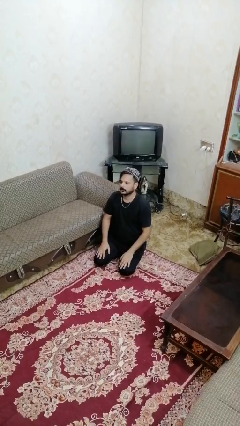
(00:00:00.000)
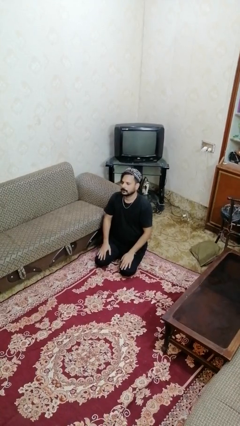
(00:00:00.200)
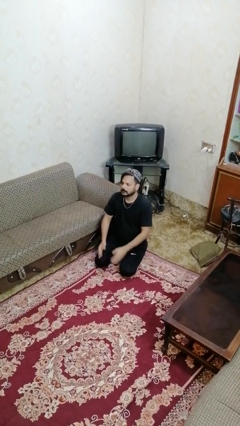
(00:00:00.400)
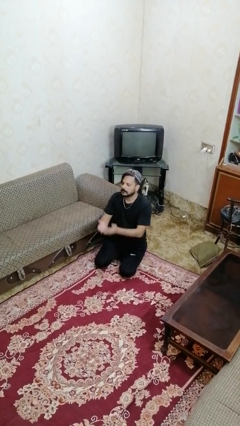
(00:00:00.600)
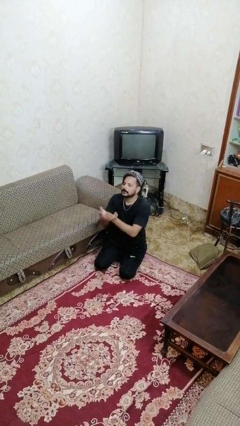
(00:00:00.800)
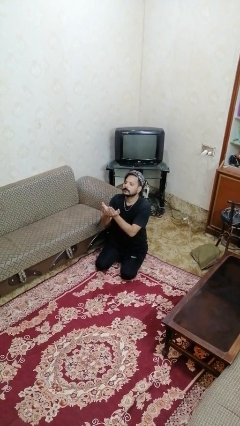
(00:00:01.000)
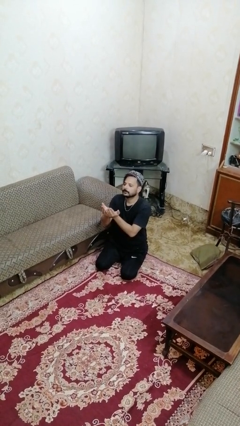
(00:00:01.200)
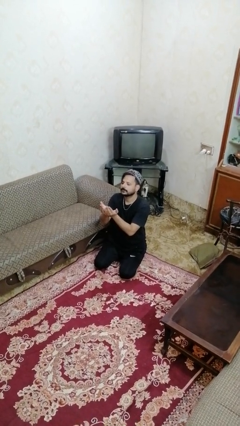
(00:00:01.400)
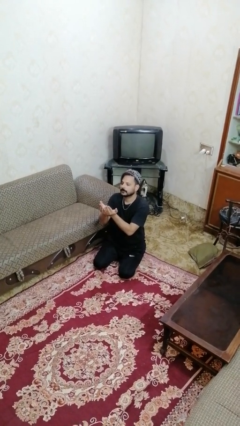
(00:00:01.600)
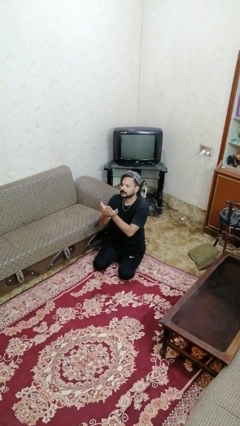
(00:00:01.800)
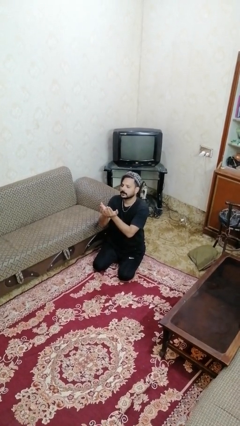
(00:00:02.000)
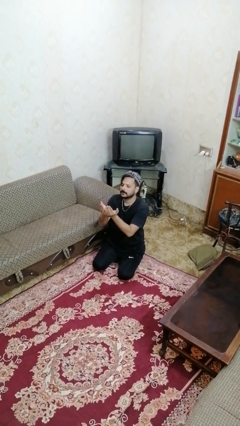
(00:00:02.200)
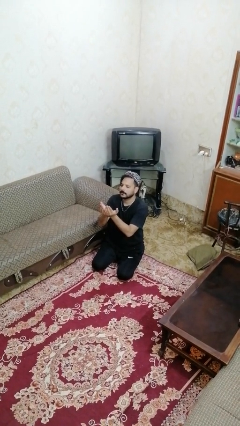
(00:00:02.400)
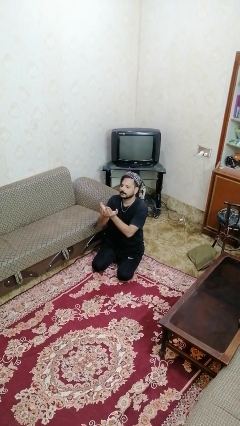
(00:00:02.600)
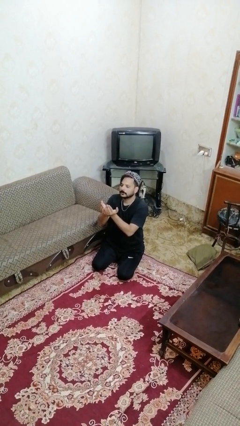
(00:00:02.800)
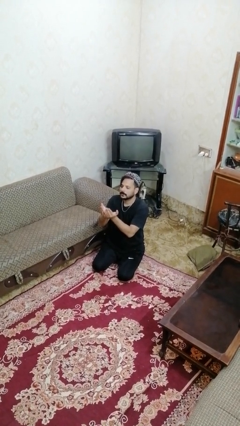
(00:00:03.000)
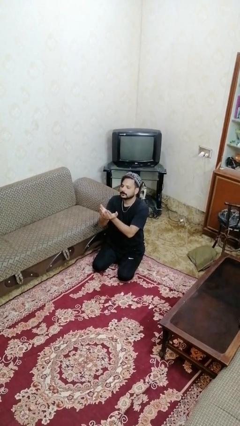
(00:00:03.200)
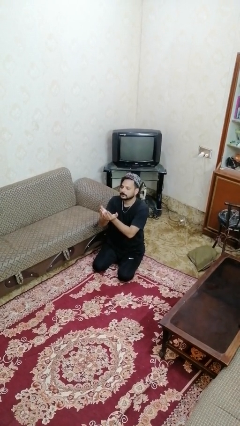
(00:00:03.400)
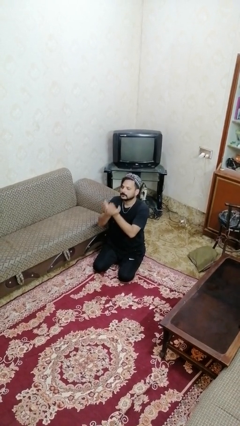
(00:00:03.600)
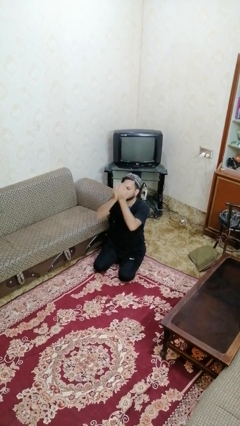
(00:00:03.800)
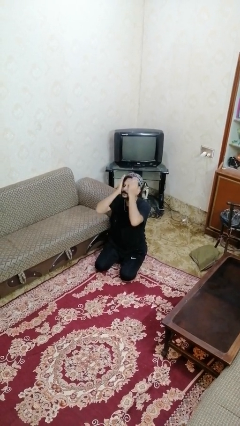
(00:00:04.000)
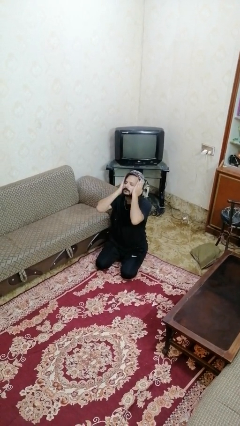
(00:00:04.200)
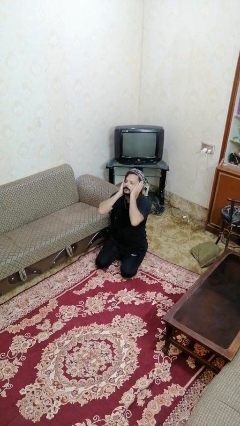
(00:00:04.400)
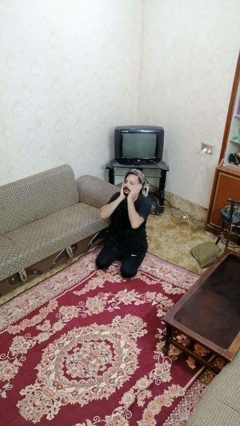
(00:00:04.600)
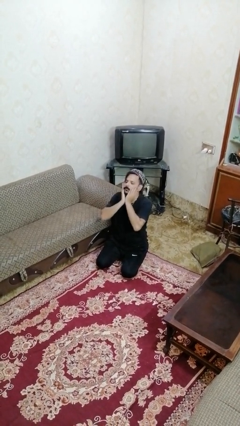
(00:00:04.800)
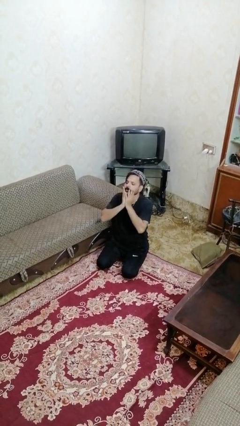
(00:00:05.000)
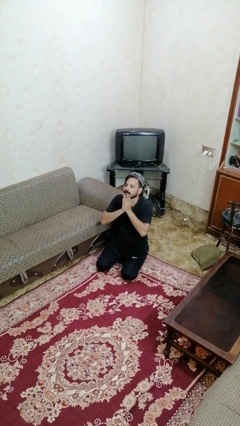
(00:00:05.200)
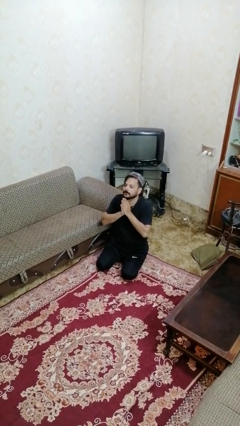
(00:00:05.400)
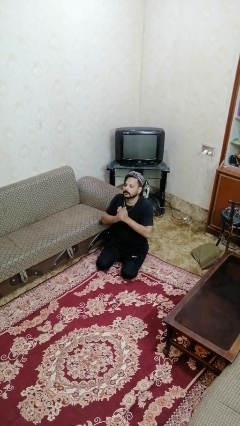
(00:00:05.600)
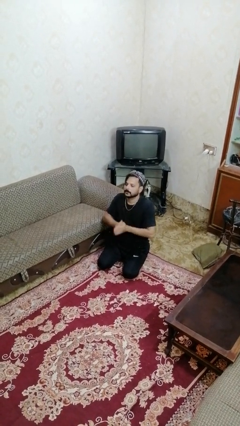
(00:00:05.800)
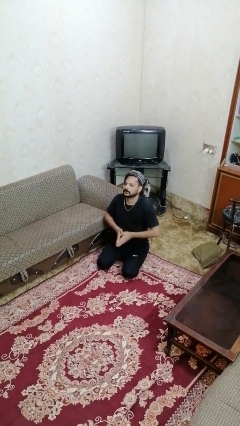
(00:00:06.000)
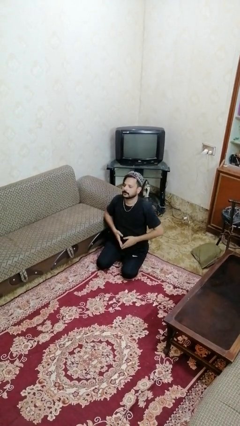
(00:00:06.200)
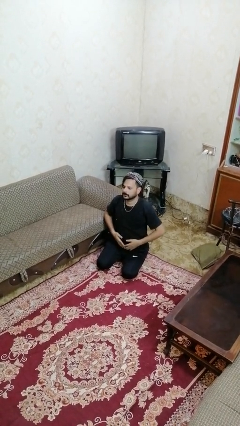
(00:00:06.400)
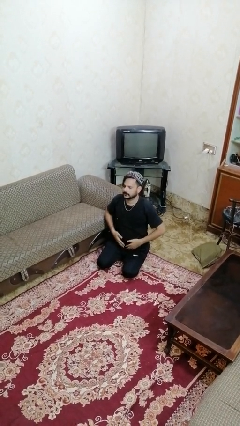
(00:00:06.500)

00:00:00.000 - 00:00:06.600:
person prays

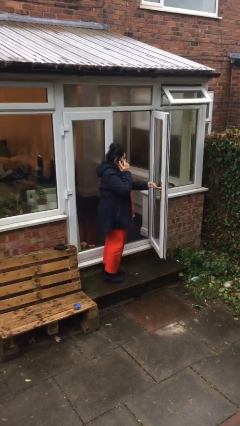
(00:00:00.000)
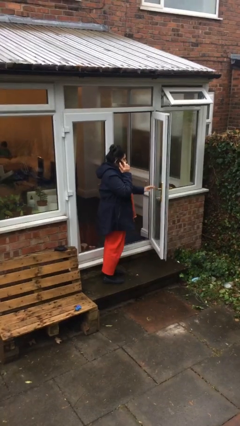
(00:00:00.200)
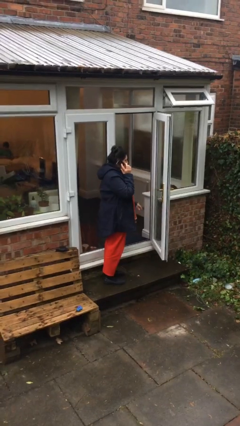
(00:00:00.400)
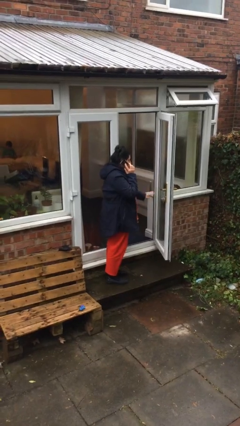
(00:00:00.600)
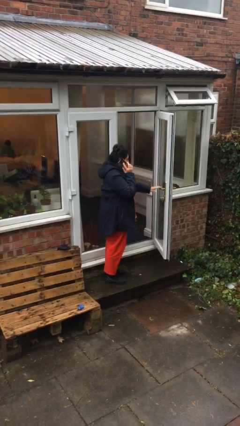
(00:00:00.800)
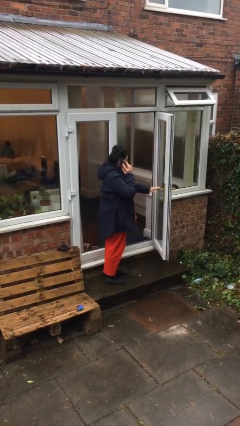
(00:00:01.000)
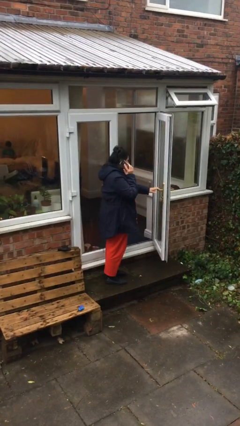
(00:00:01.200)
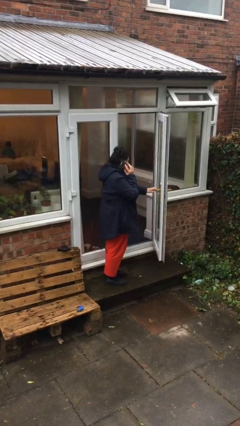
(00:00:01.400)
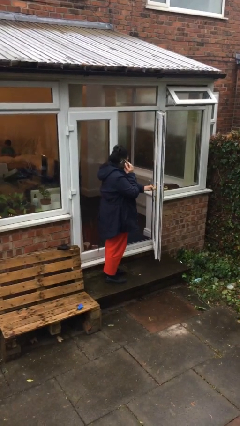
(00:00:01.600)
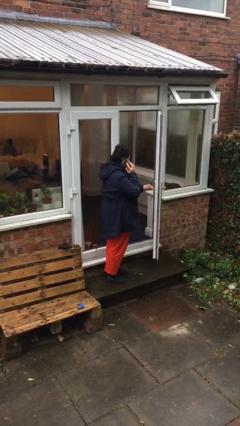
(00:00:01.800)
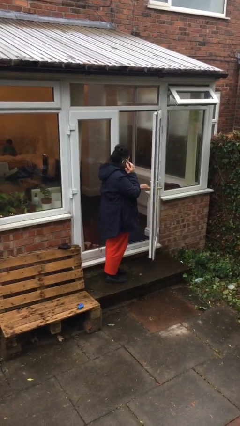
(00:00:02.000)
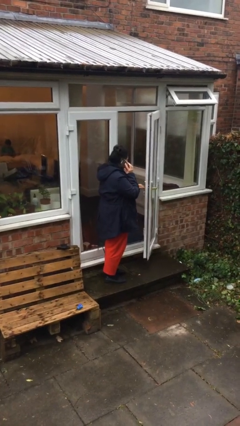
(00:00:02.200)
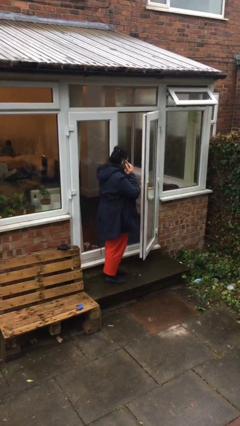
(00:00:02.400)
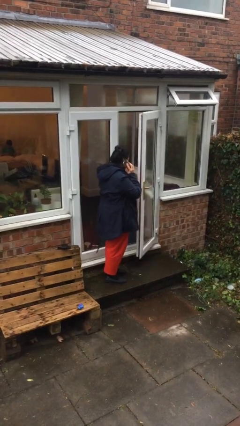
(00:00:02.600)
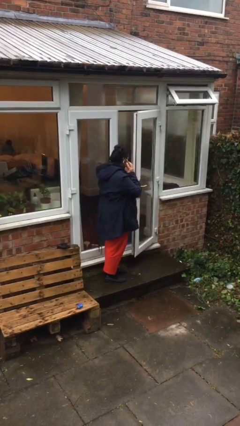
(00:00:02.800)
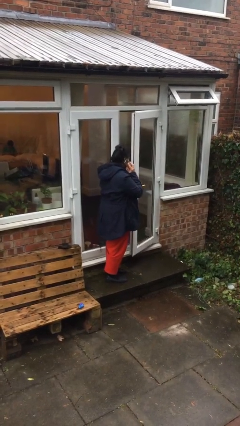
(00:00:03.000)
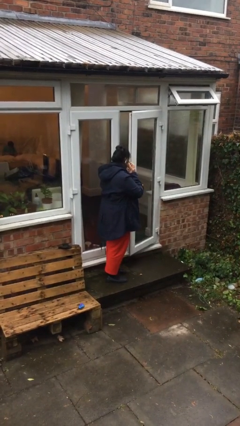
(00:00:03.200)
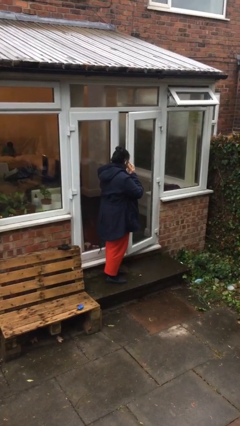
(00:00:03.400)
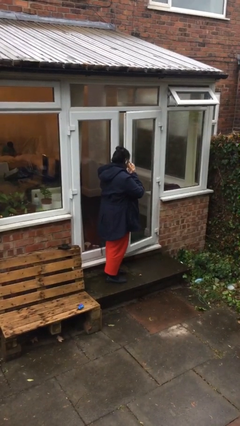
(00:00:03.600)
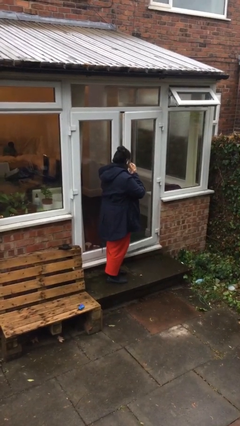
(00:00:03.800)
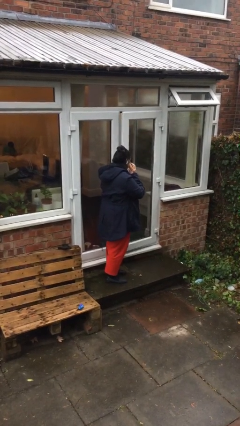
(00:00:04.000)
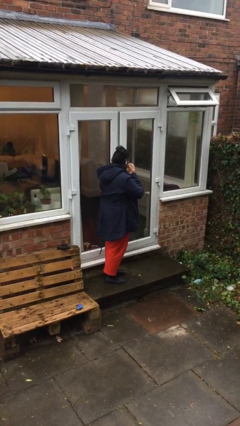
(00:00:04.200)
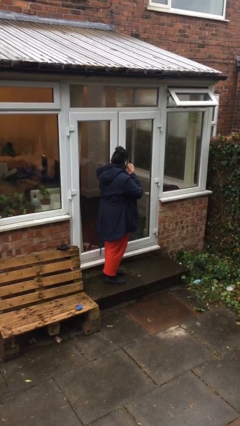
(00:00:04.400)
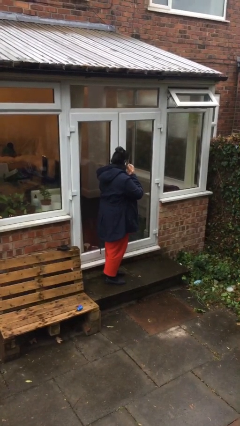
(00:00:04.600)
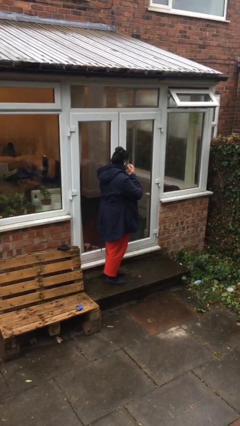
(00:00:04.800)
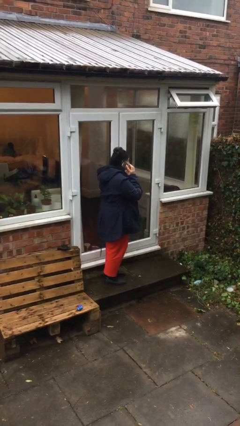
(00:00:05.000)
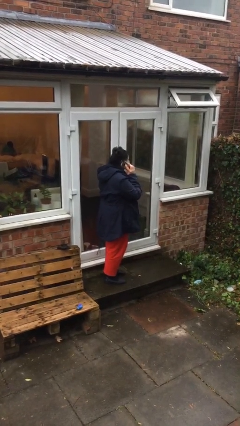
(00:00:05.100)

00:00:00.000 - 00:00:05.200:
person closes facility door

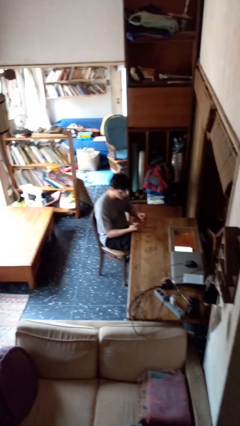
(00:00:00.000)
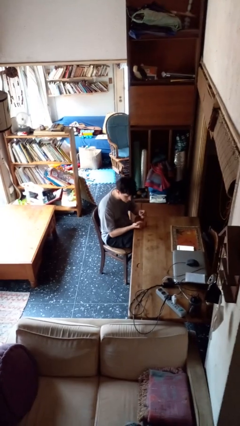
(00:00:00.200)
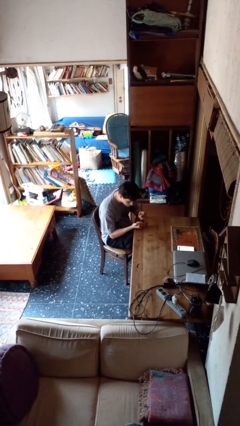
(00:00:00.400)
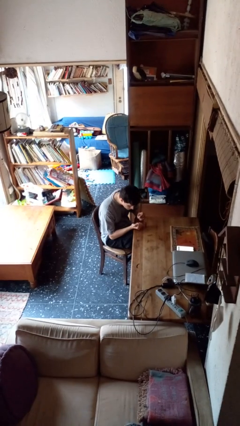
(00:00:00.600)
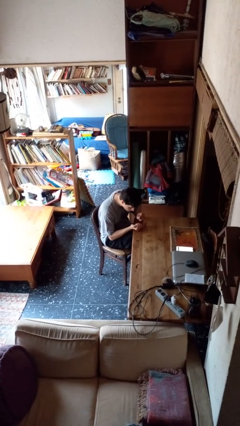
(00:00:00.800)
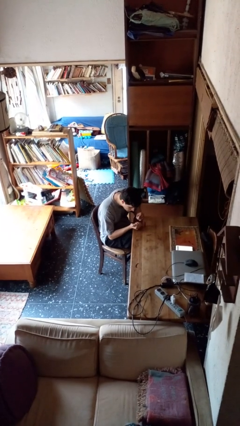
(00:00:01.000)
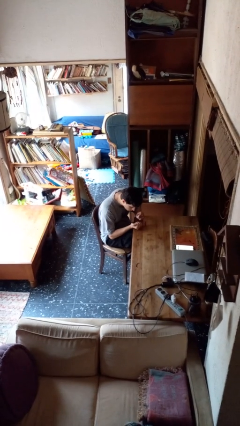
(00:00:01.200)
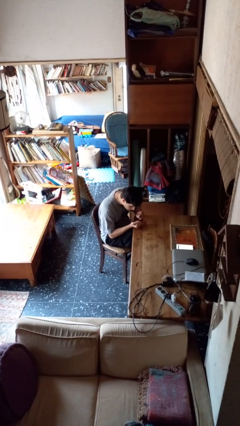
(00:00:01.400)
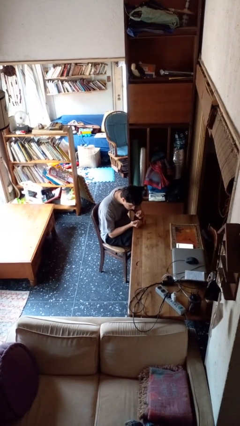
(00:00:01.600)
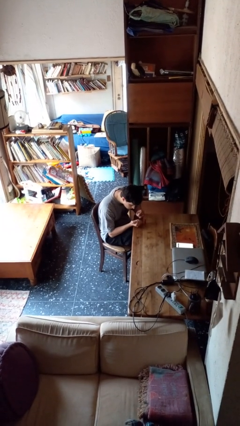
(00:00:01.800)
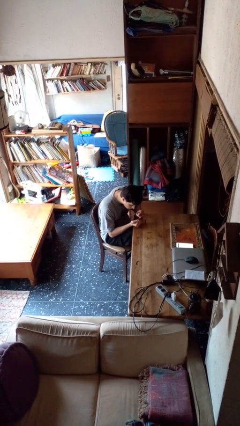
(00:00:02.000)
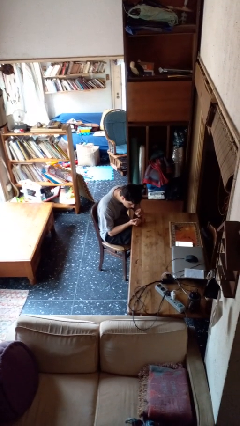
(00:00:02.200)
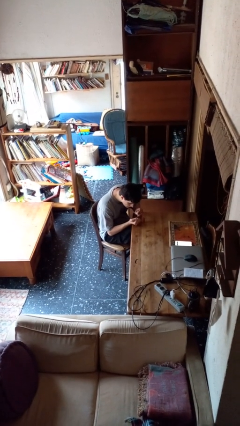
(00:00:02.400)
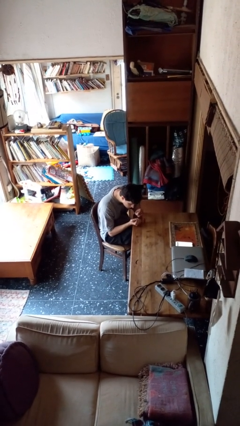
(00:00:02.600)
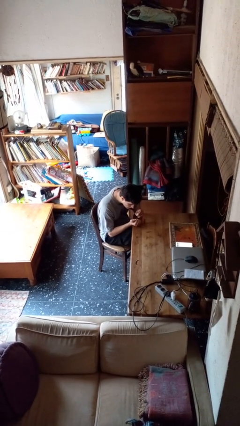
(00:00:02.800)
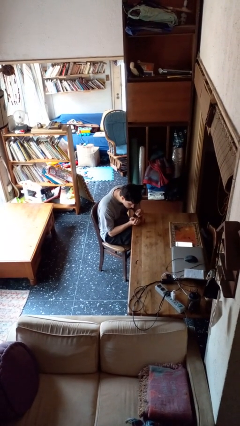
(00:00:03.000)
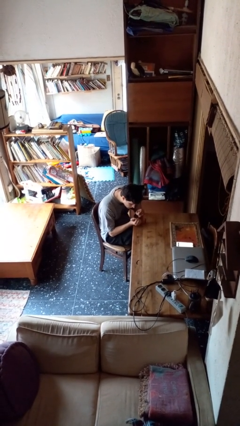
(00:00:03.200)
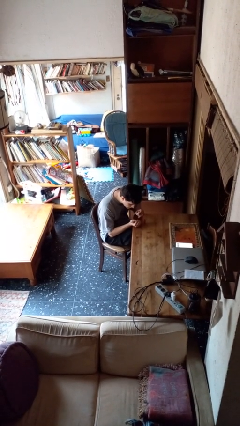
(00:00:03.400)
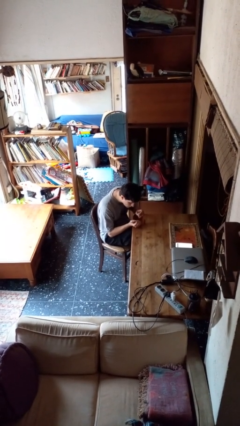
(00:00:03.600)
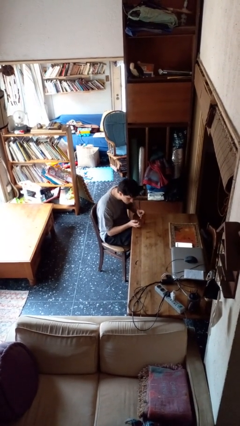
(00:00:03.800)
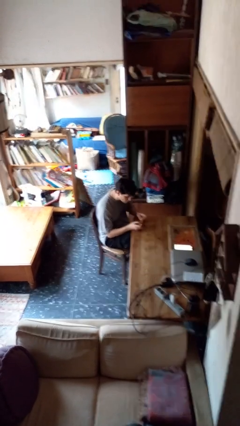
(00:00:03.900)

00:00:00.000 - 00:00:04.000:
person paints fingernails

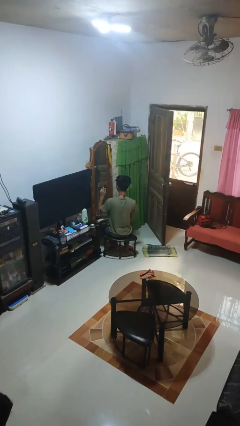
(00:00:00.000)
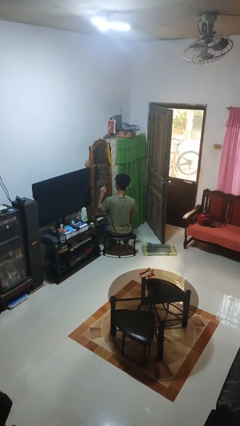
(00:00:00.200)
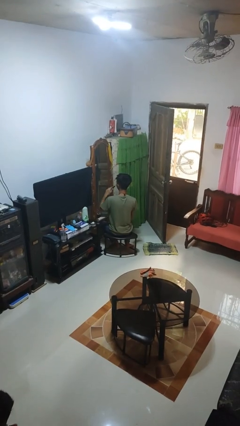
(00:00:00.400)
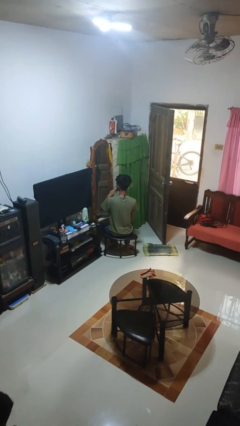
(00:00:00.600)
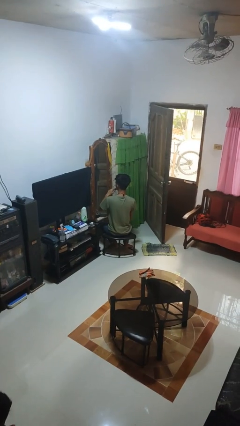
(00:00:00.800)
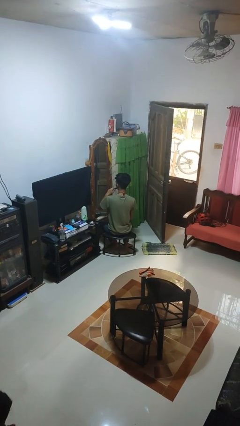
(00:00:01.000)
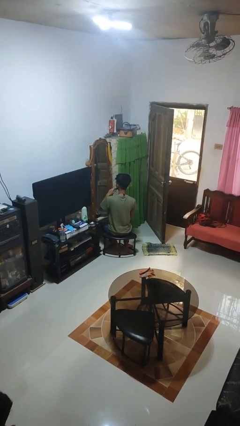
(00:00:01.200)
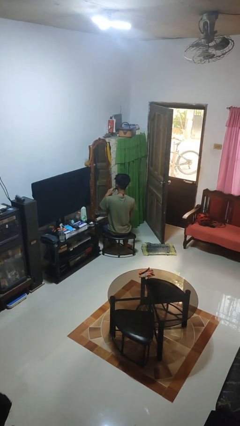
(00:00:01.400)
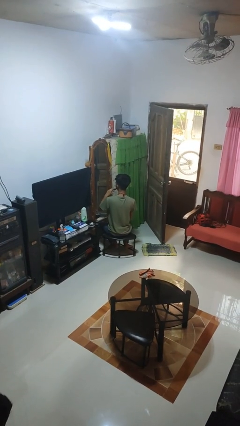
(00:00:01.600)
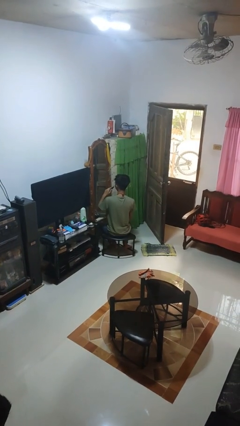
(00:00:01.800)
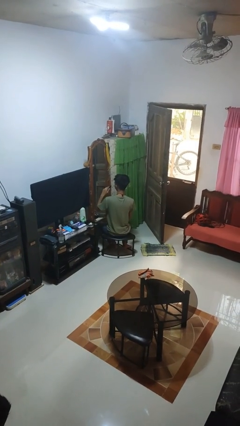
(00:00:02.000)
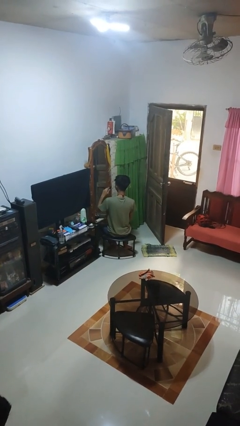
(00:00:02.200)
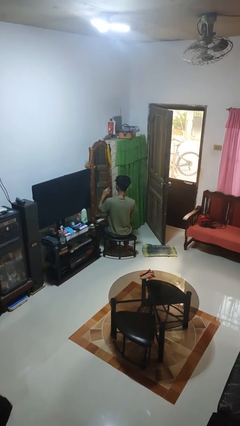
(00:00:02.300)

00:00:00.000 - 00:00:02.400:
person applies lip makeup
